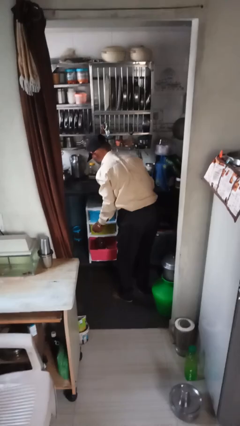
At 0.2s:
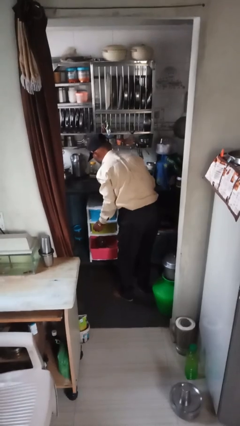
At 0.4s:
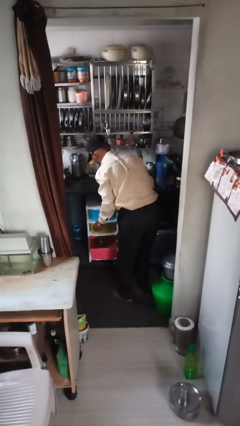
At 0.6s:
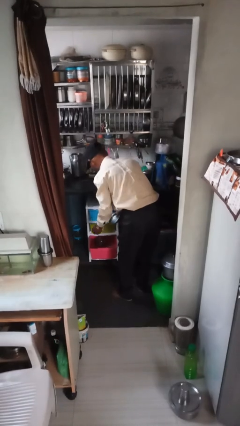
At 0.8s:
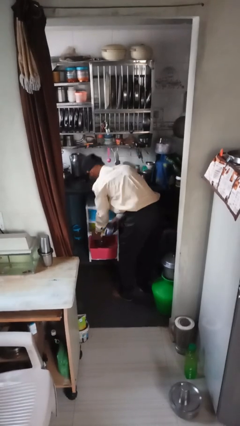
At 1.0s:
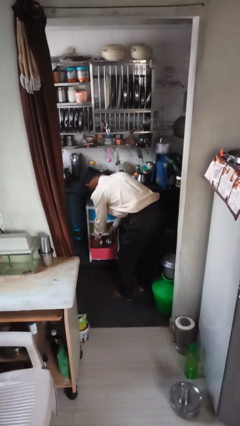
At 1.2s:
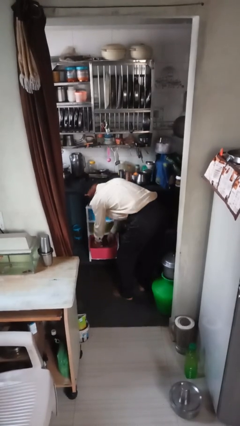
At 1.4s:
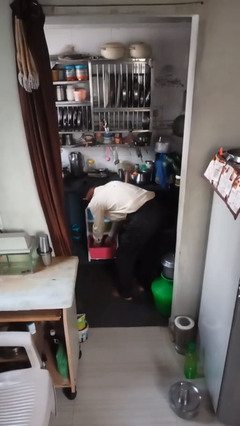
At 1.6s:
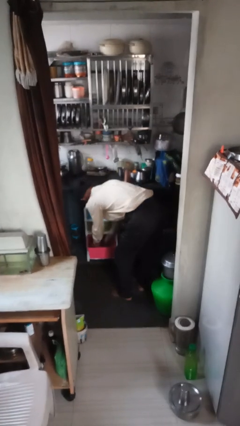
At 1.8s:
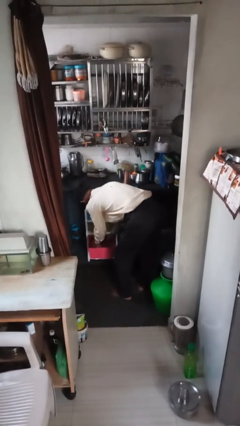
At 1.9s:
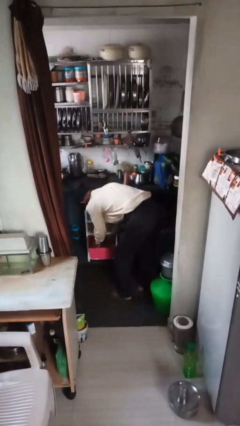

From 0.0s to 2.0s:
person puts object into kitchen drawer

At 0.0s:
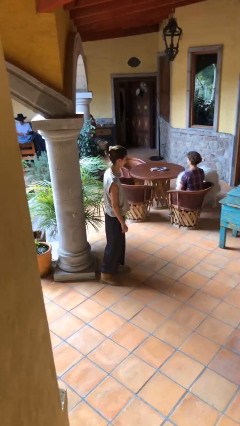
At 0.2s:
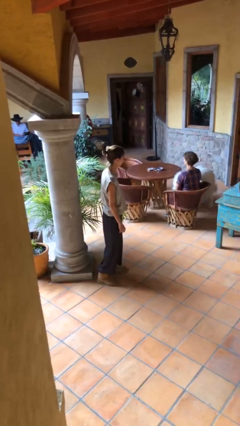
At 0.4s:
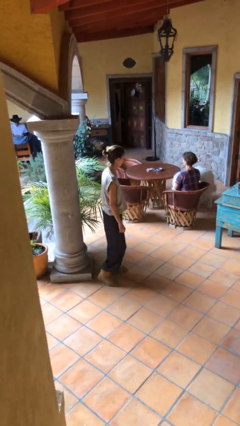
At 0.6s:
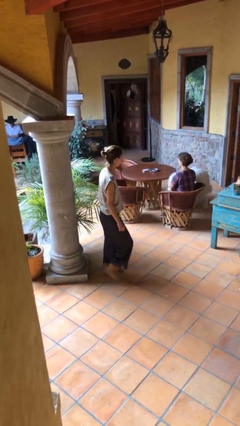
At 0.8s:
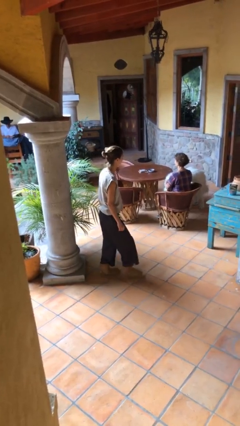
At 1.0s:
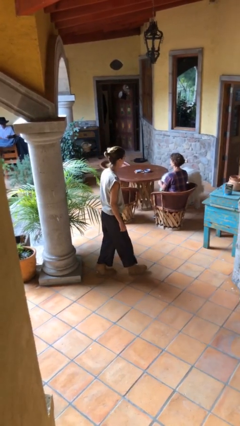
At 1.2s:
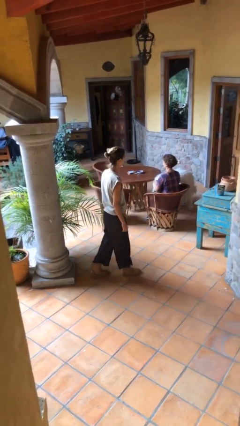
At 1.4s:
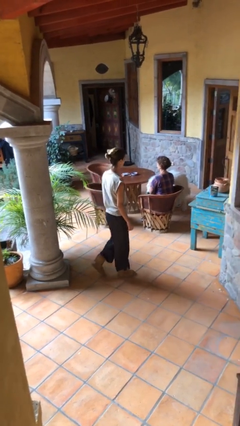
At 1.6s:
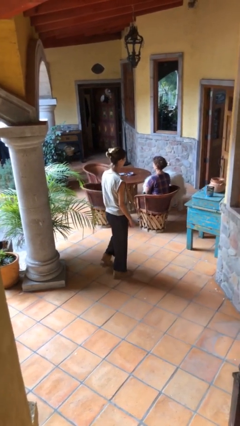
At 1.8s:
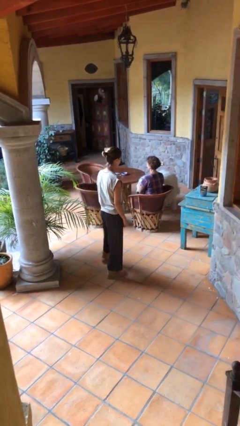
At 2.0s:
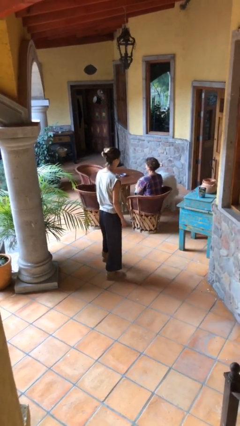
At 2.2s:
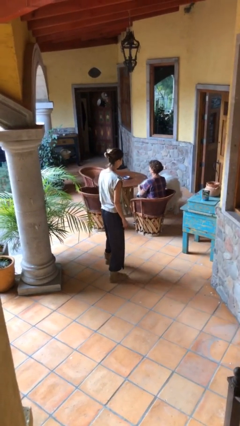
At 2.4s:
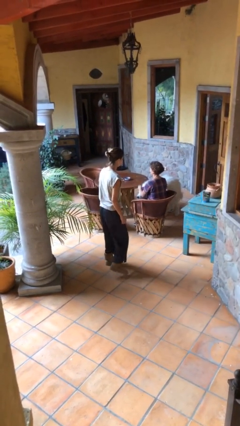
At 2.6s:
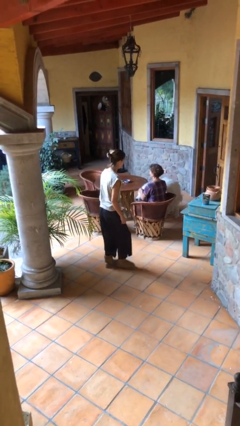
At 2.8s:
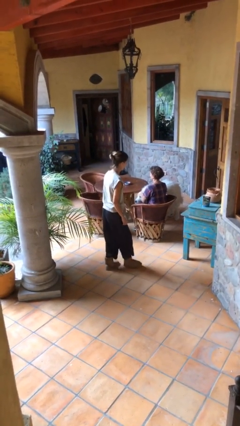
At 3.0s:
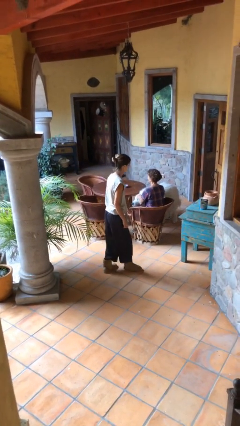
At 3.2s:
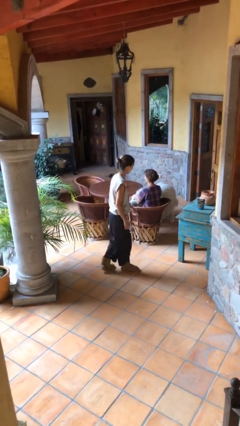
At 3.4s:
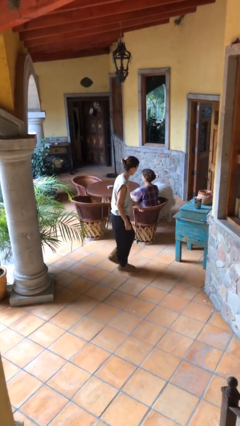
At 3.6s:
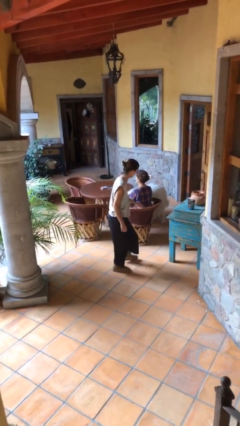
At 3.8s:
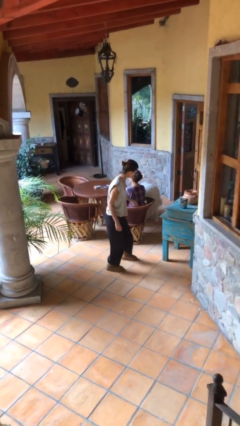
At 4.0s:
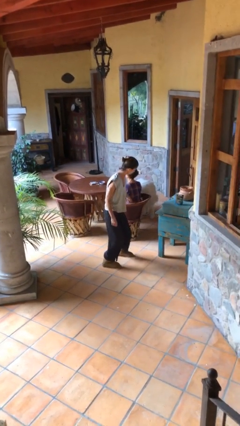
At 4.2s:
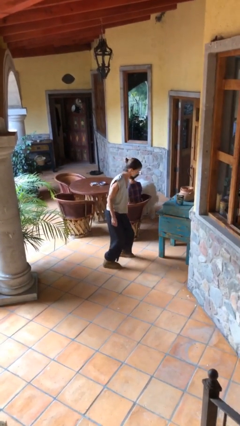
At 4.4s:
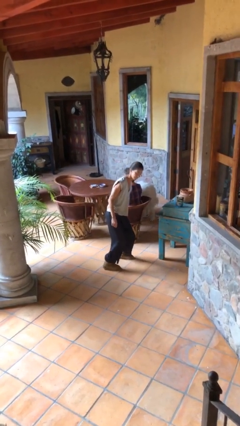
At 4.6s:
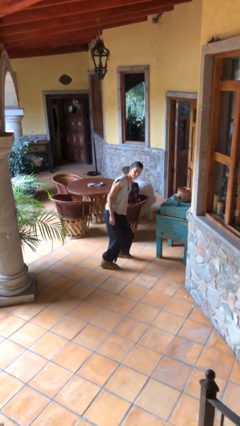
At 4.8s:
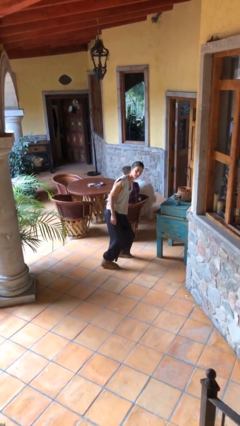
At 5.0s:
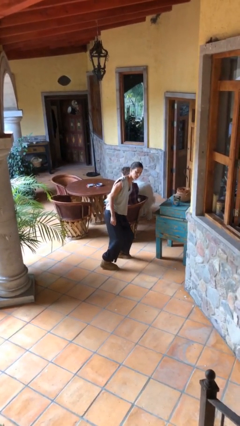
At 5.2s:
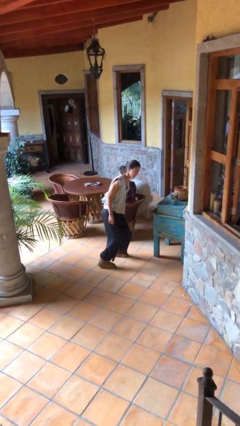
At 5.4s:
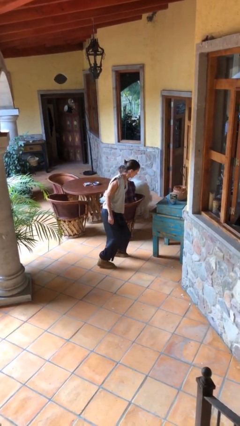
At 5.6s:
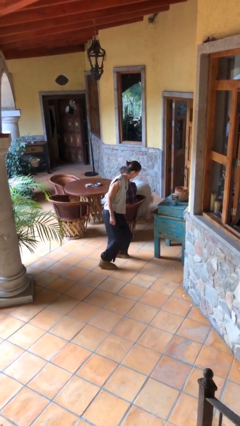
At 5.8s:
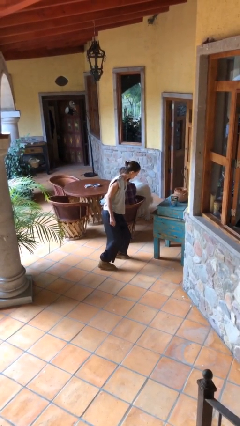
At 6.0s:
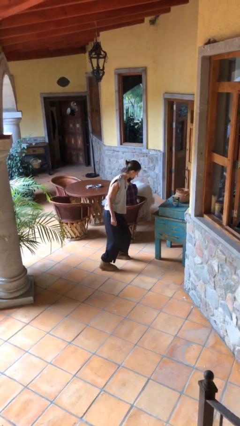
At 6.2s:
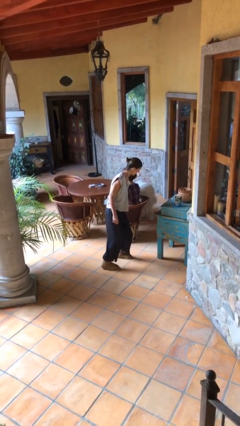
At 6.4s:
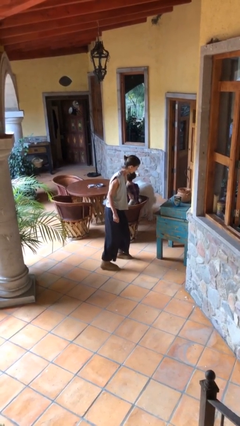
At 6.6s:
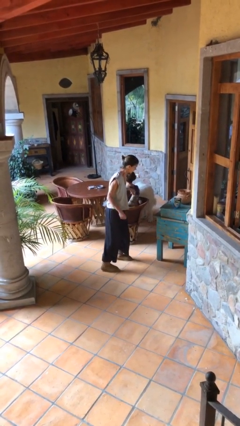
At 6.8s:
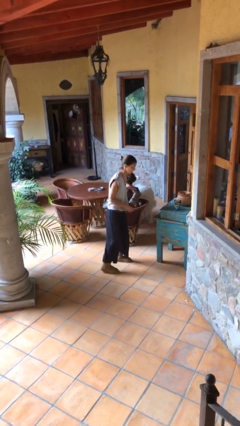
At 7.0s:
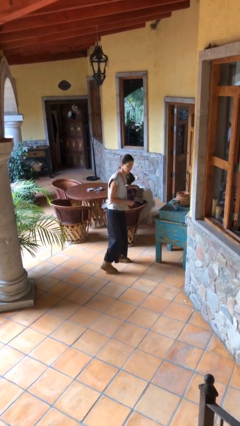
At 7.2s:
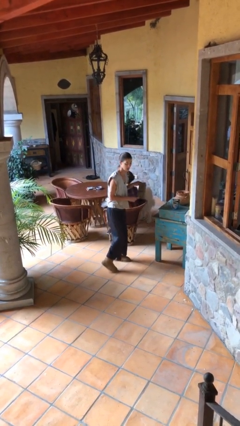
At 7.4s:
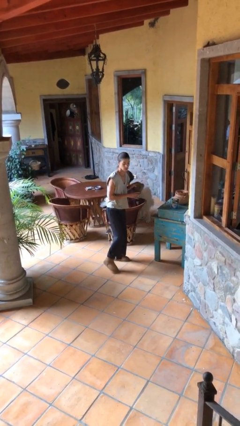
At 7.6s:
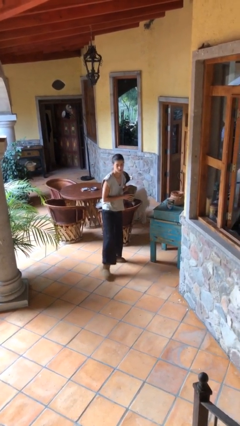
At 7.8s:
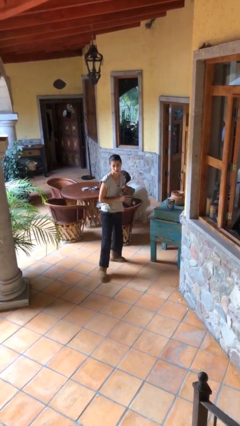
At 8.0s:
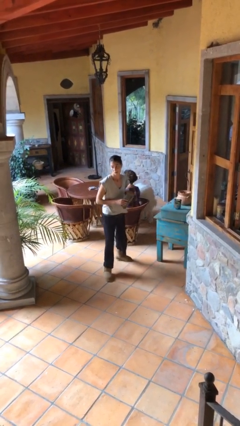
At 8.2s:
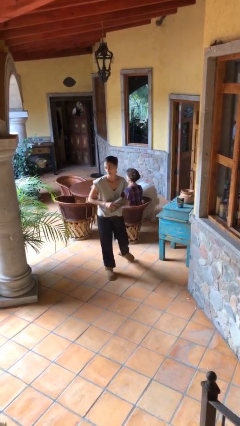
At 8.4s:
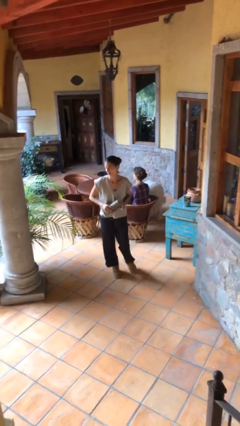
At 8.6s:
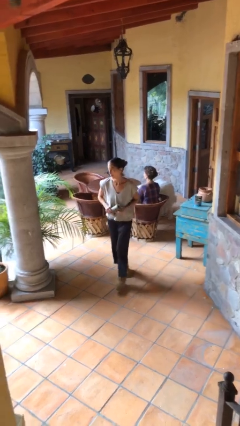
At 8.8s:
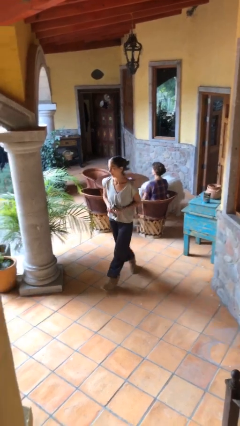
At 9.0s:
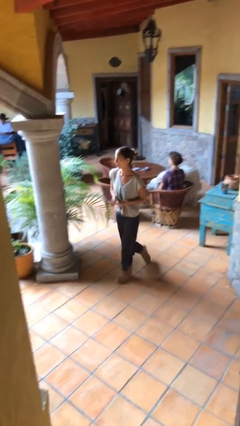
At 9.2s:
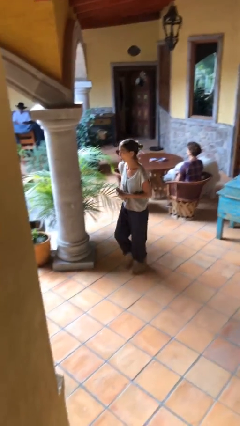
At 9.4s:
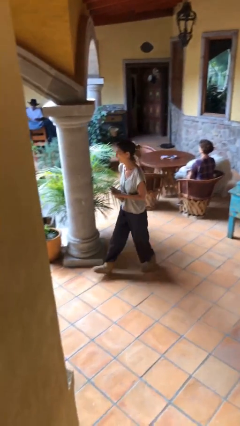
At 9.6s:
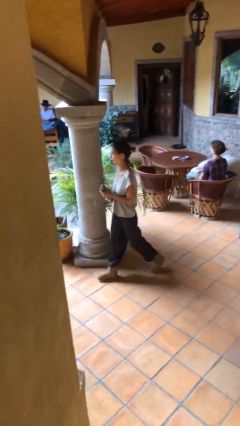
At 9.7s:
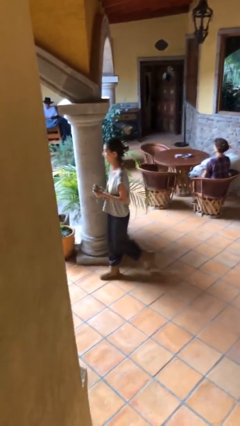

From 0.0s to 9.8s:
person steals object from person

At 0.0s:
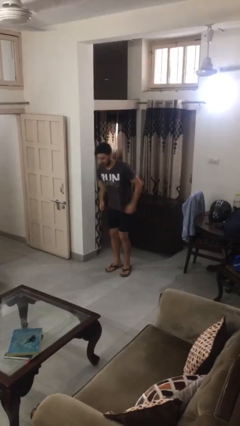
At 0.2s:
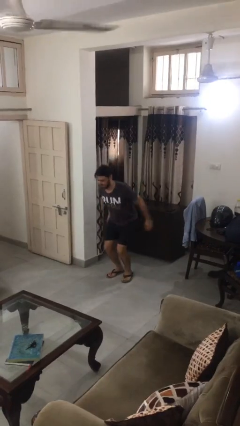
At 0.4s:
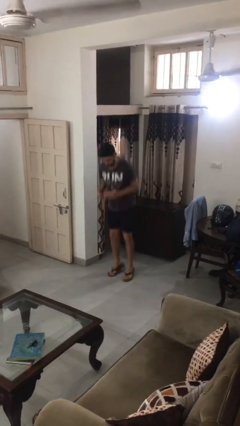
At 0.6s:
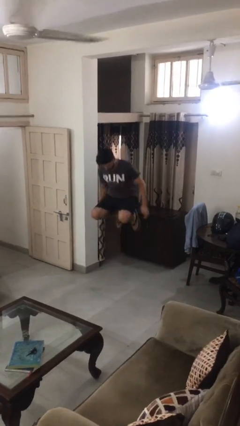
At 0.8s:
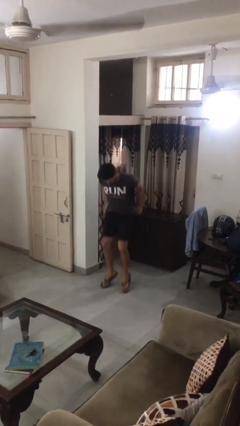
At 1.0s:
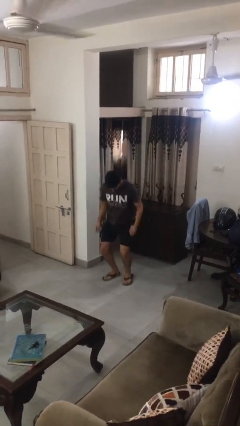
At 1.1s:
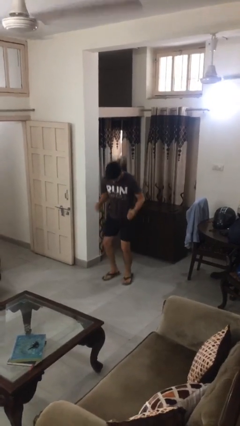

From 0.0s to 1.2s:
person jumps

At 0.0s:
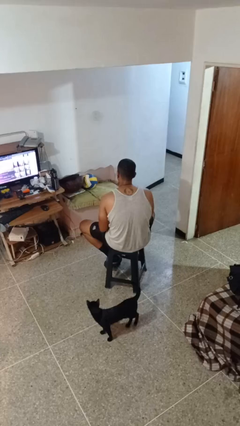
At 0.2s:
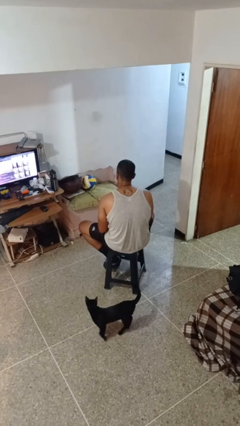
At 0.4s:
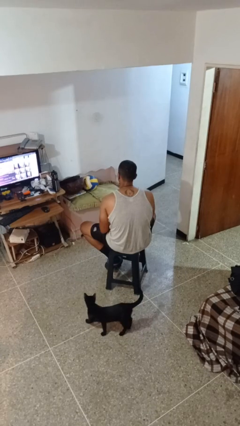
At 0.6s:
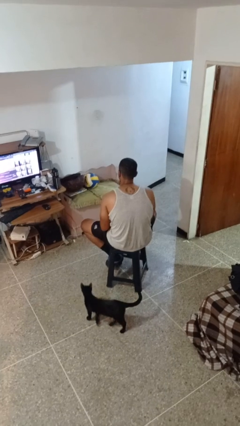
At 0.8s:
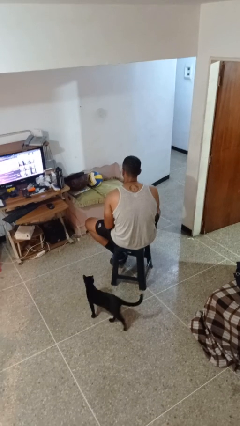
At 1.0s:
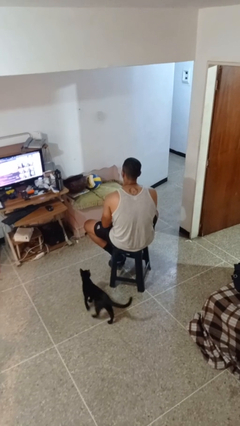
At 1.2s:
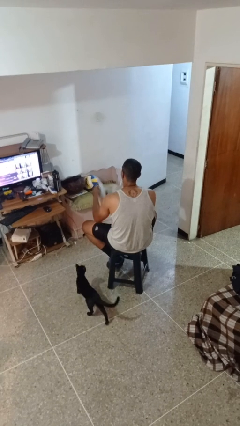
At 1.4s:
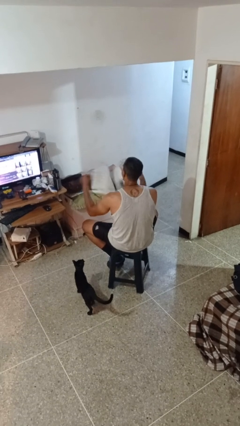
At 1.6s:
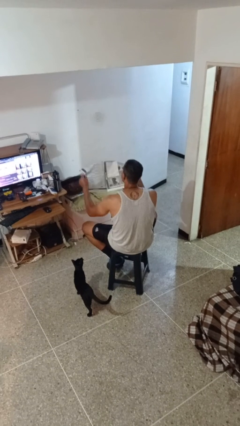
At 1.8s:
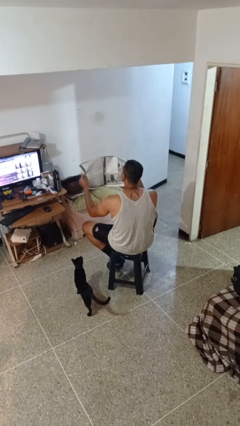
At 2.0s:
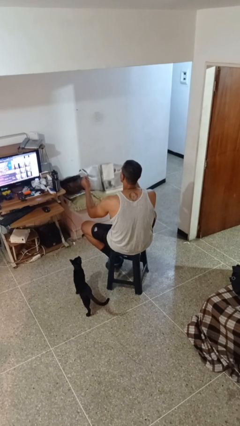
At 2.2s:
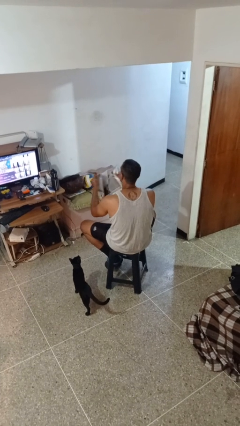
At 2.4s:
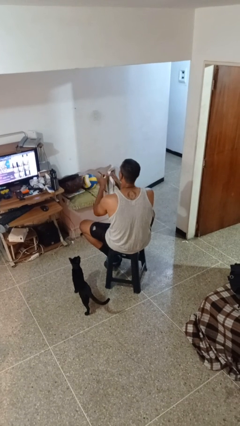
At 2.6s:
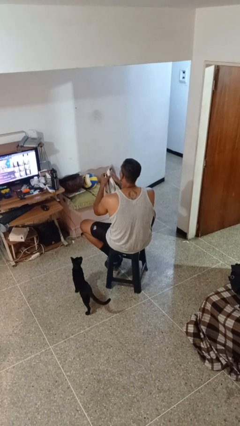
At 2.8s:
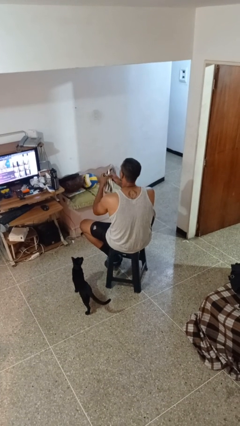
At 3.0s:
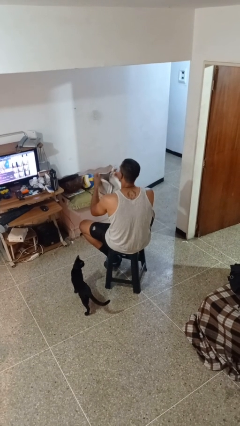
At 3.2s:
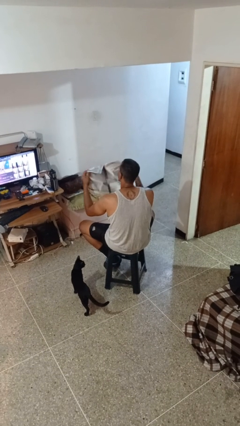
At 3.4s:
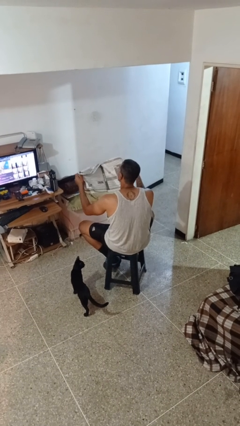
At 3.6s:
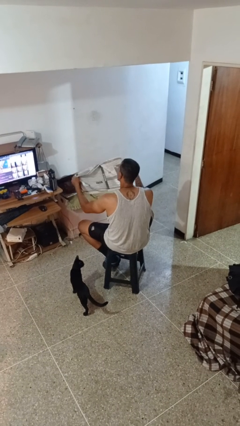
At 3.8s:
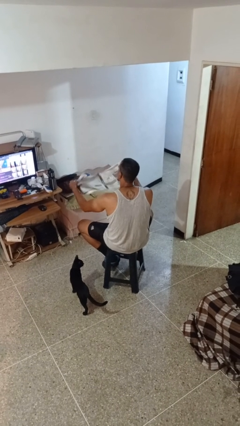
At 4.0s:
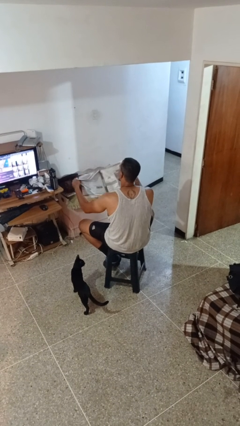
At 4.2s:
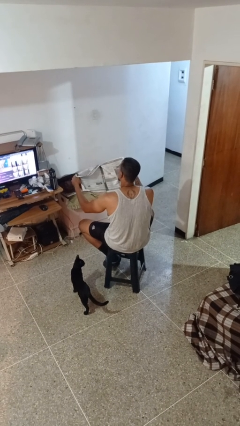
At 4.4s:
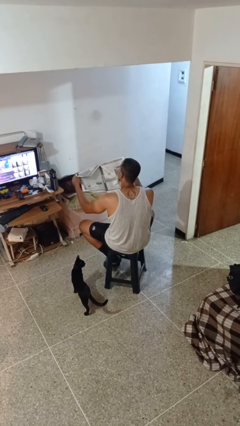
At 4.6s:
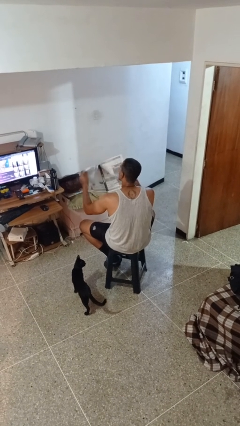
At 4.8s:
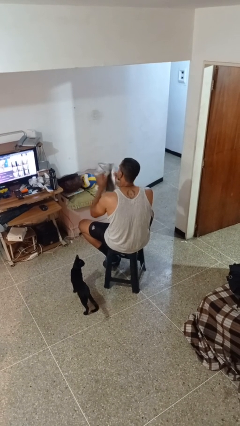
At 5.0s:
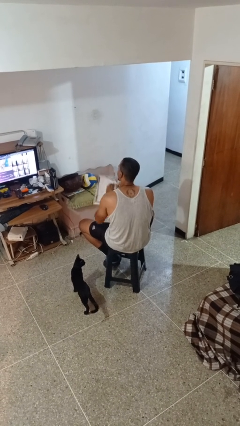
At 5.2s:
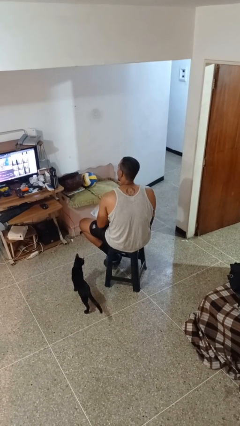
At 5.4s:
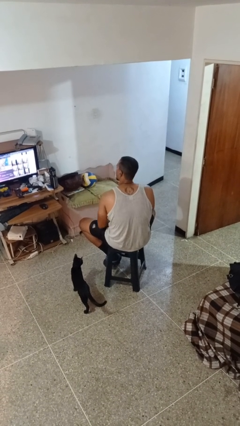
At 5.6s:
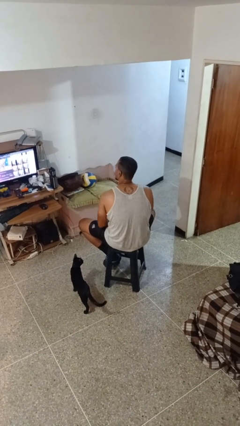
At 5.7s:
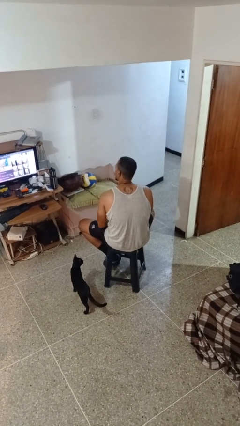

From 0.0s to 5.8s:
person reads newspaper
